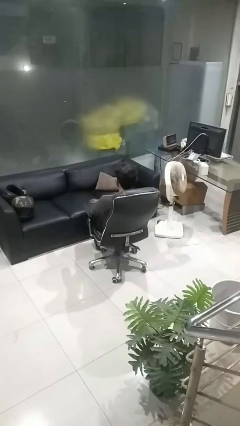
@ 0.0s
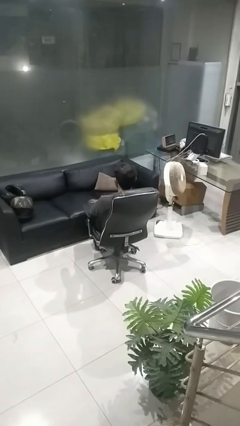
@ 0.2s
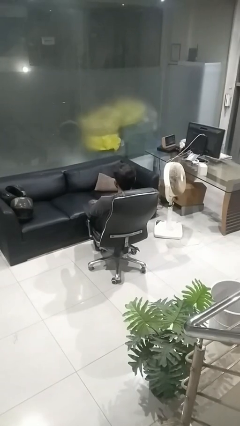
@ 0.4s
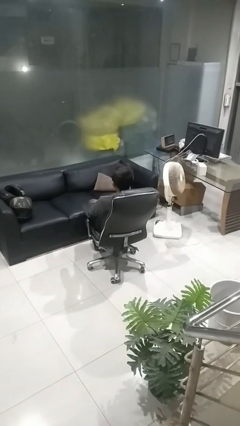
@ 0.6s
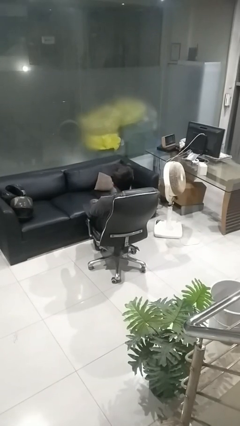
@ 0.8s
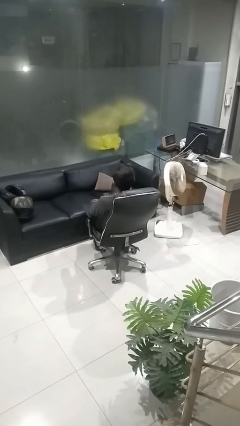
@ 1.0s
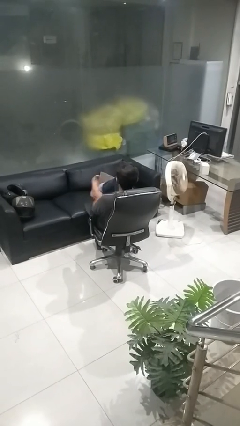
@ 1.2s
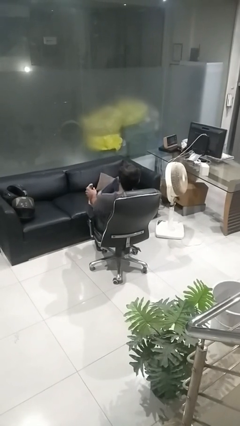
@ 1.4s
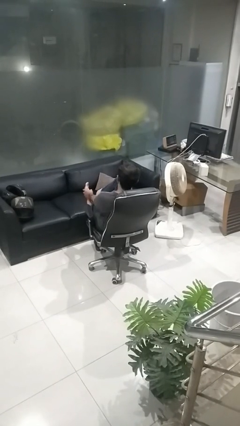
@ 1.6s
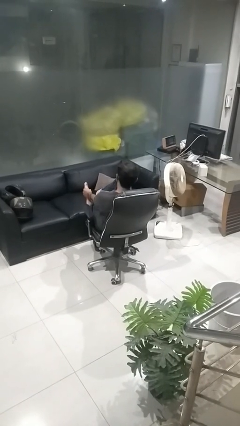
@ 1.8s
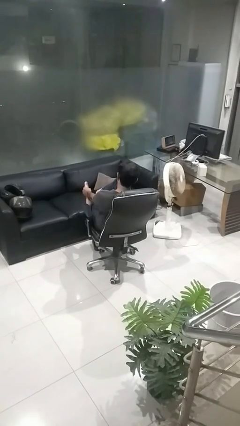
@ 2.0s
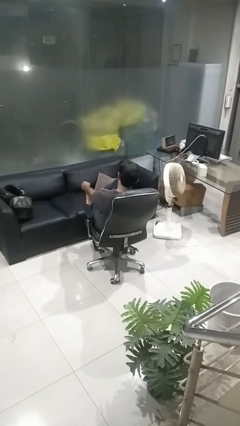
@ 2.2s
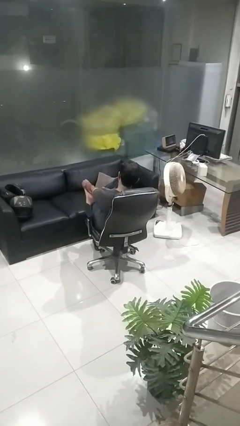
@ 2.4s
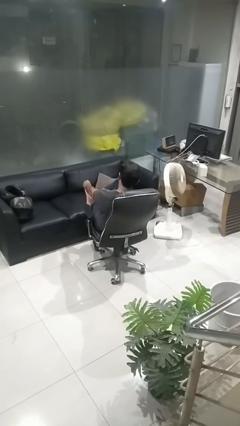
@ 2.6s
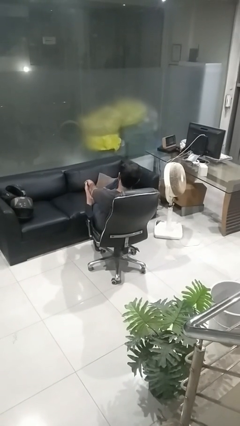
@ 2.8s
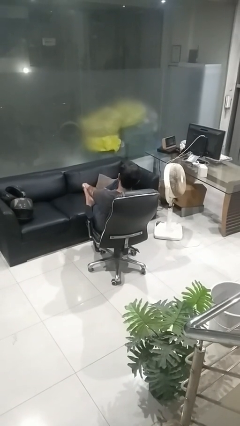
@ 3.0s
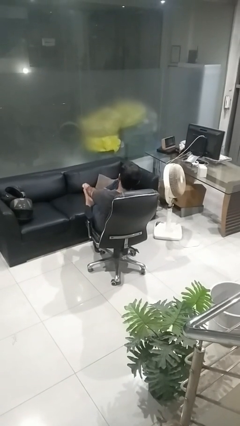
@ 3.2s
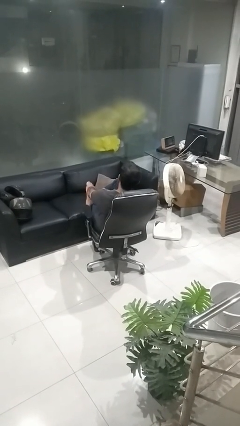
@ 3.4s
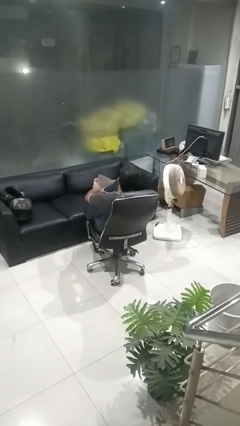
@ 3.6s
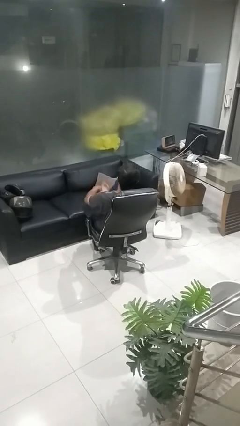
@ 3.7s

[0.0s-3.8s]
person rubs foot

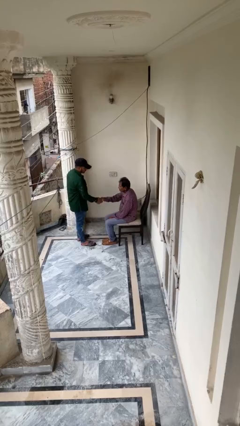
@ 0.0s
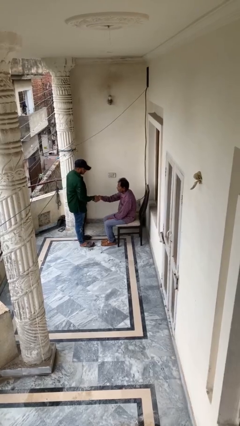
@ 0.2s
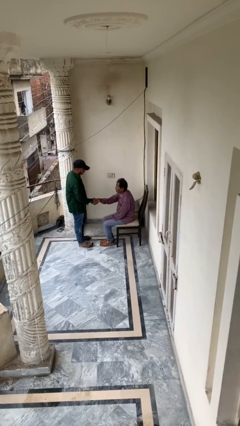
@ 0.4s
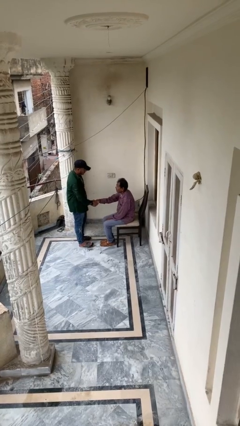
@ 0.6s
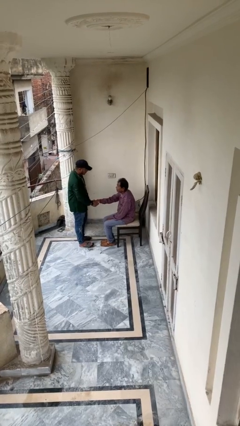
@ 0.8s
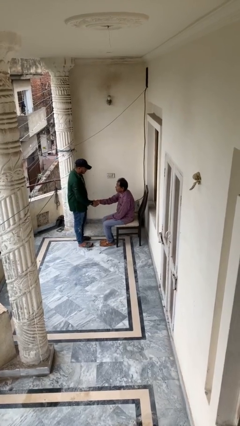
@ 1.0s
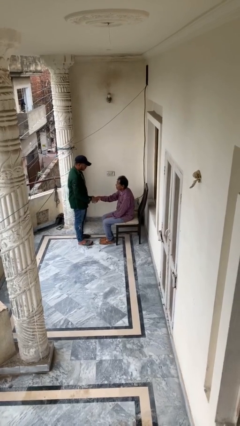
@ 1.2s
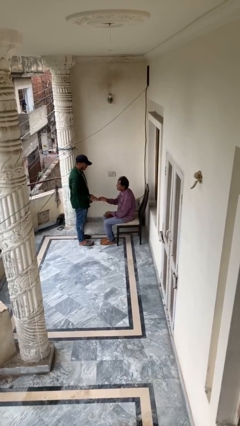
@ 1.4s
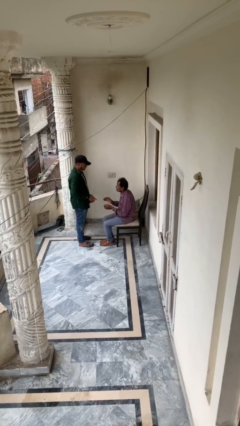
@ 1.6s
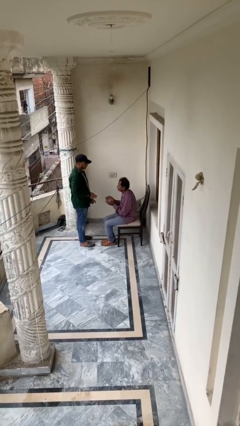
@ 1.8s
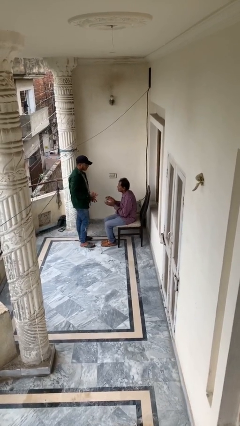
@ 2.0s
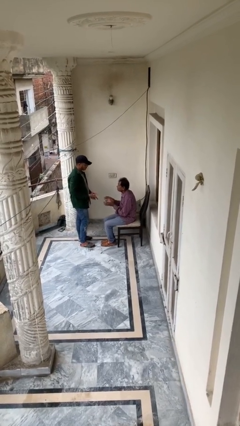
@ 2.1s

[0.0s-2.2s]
person shakes hand

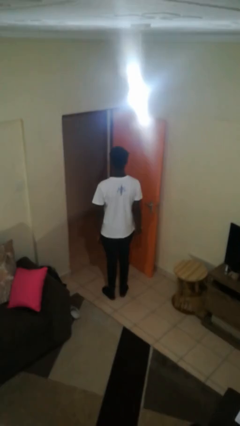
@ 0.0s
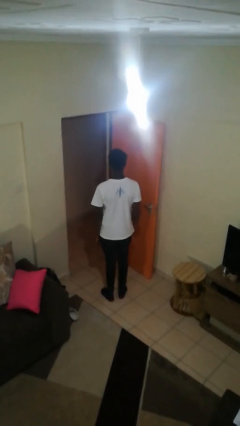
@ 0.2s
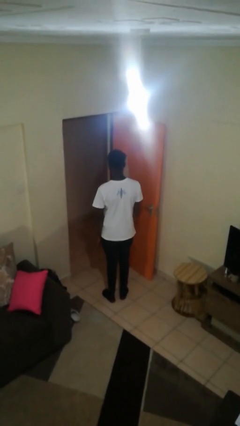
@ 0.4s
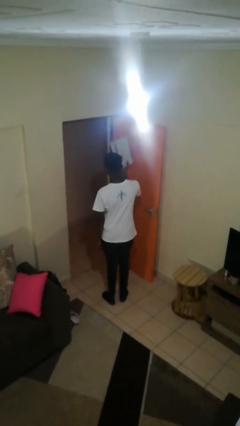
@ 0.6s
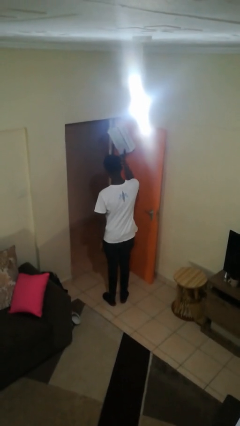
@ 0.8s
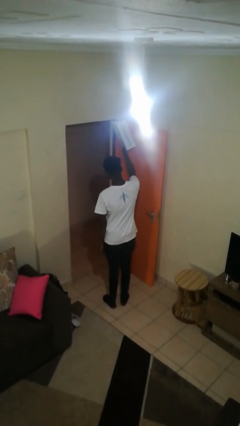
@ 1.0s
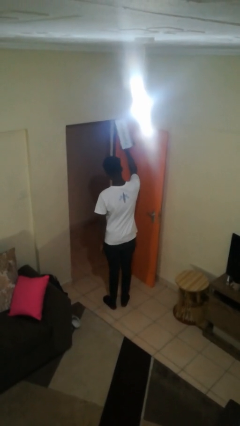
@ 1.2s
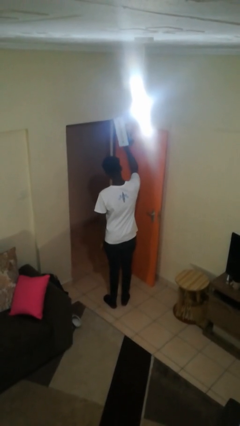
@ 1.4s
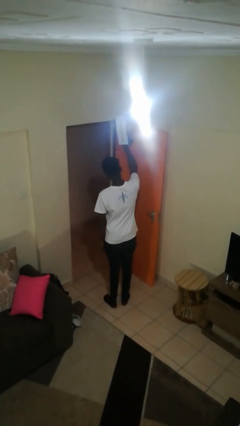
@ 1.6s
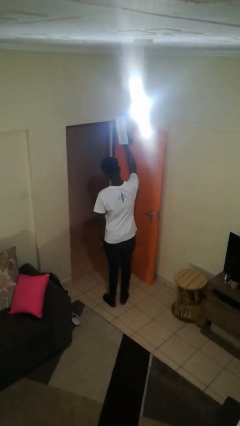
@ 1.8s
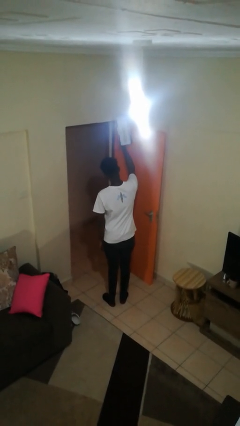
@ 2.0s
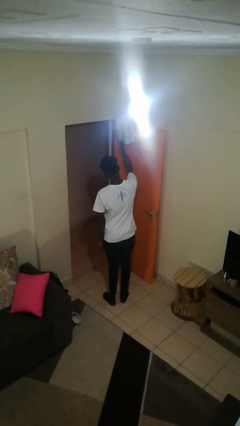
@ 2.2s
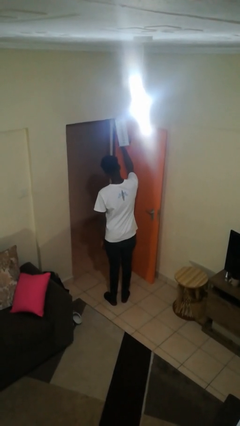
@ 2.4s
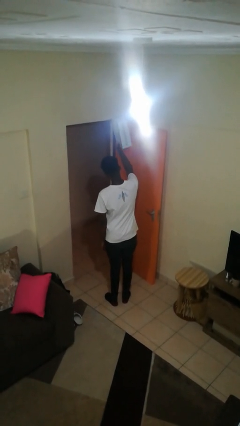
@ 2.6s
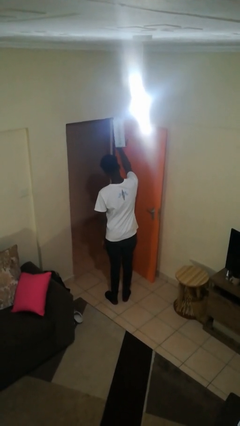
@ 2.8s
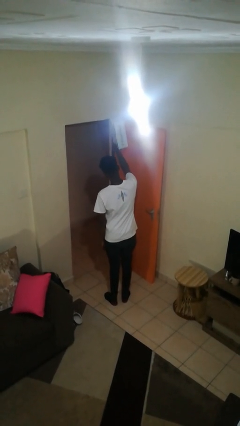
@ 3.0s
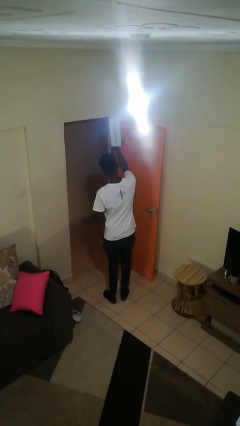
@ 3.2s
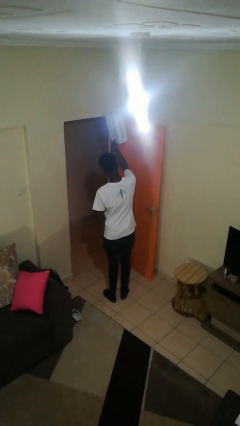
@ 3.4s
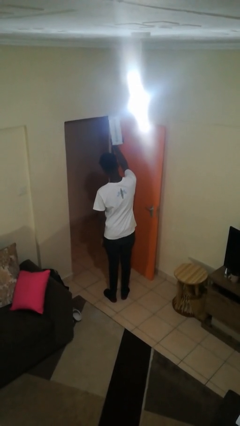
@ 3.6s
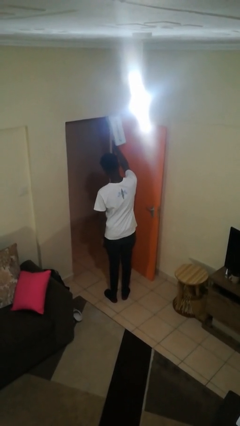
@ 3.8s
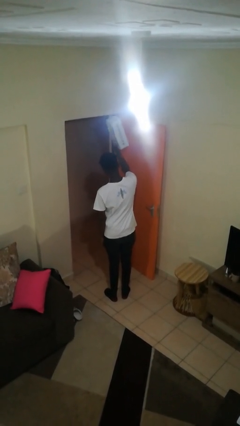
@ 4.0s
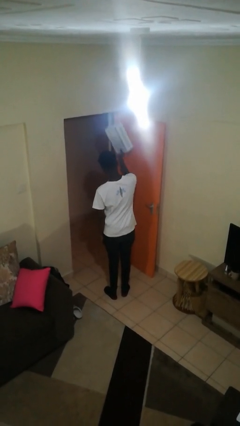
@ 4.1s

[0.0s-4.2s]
person holds object above head

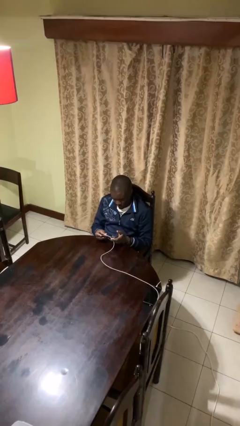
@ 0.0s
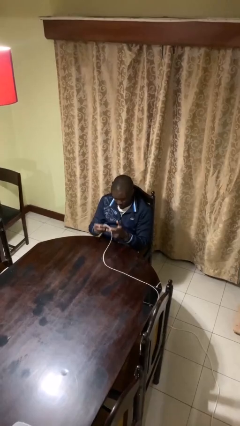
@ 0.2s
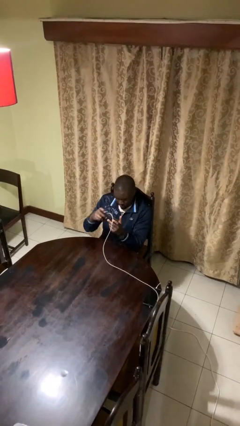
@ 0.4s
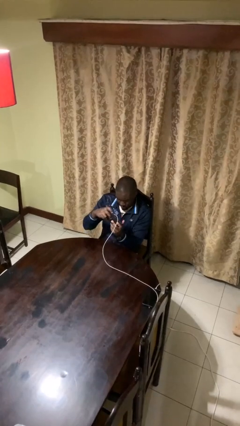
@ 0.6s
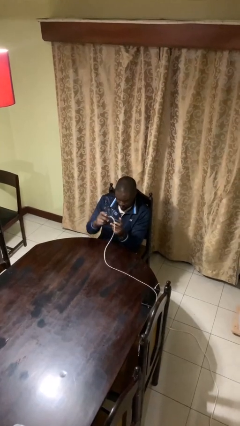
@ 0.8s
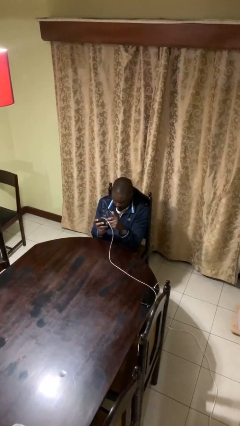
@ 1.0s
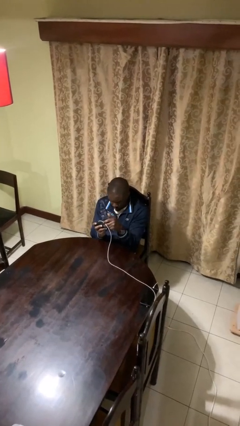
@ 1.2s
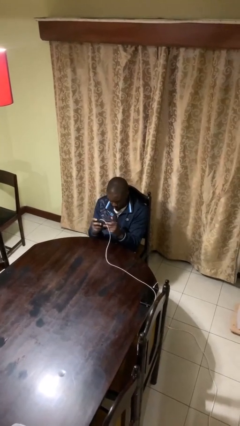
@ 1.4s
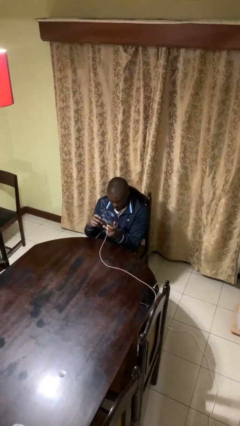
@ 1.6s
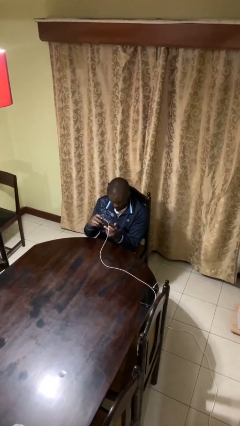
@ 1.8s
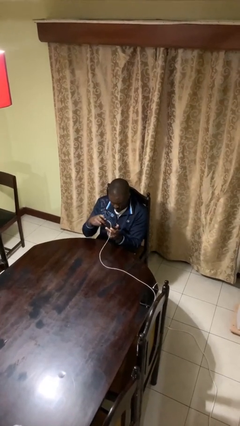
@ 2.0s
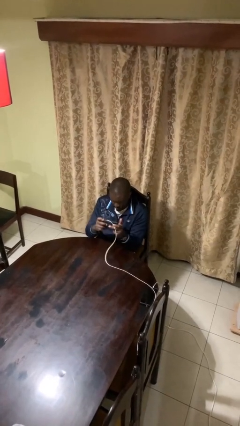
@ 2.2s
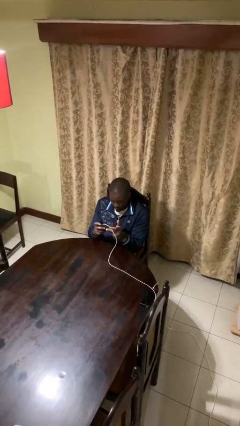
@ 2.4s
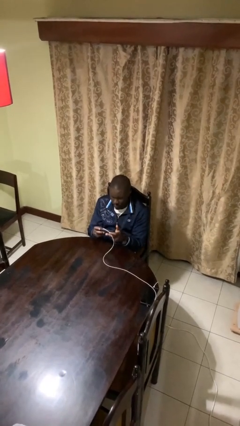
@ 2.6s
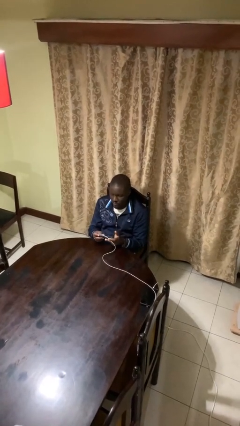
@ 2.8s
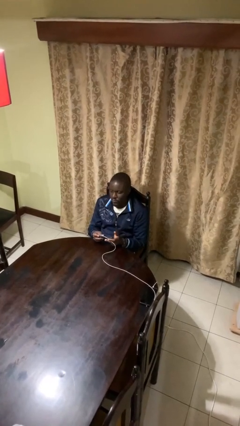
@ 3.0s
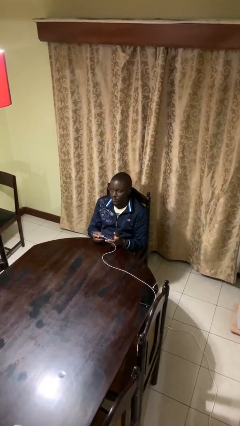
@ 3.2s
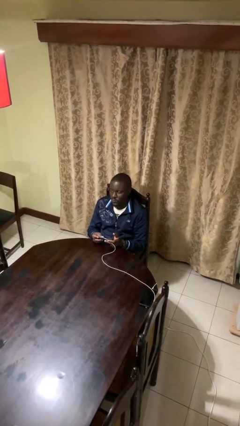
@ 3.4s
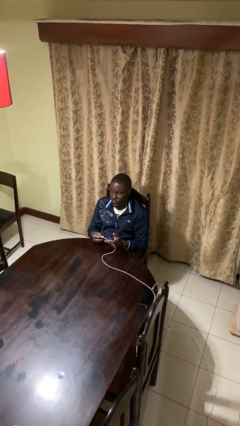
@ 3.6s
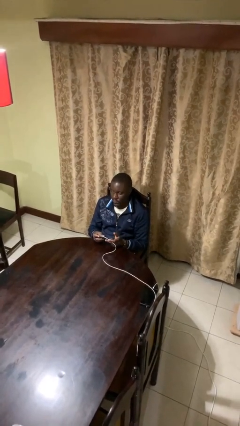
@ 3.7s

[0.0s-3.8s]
person interacts with handheld game

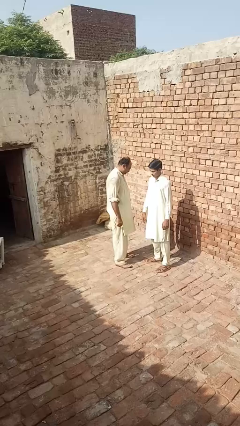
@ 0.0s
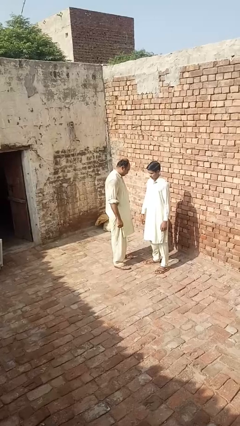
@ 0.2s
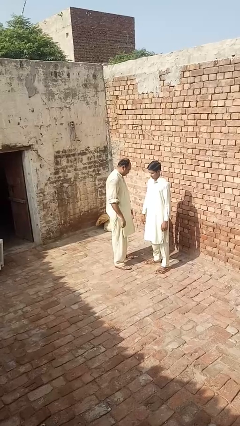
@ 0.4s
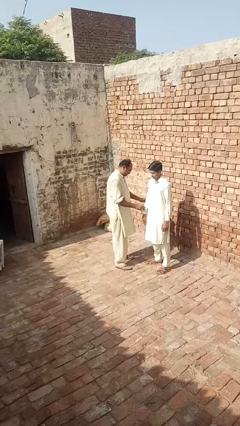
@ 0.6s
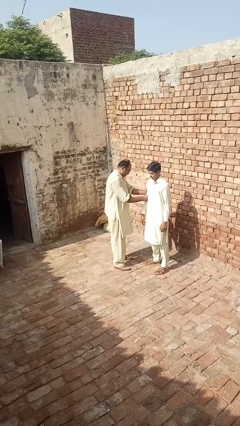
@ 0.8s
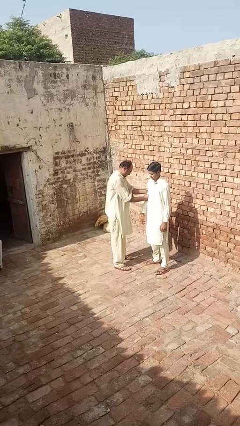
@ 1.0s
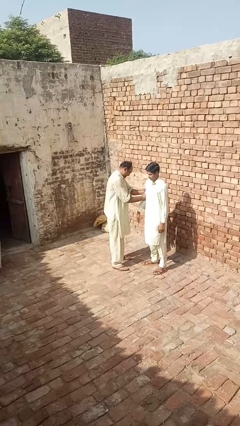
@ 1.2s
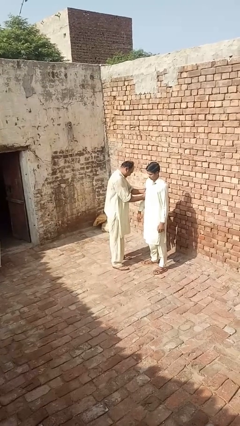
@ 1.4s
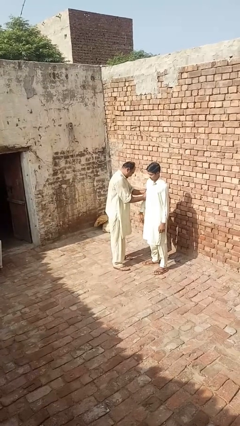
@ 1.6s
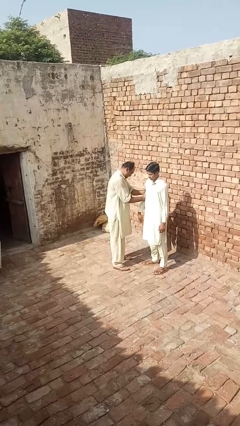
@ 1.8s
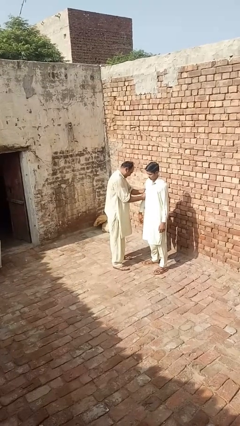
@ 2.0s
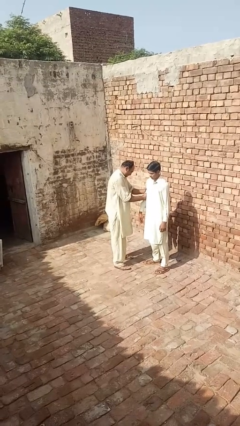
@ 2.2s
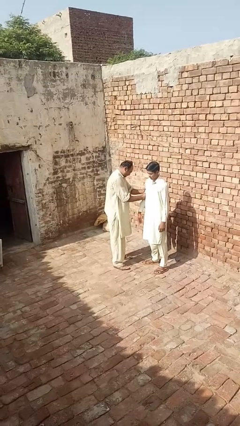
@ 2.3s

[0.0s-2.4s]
person grabs person by bicep

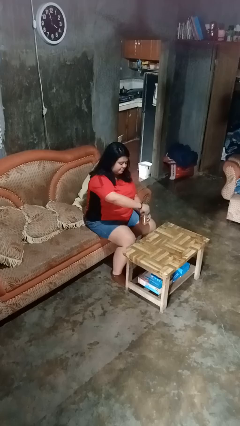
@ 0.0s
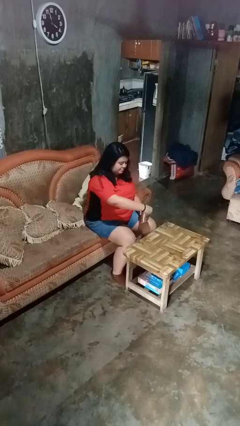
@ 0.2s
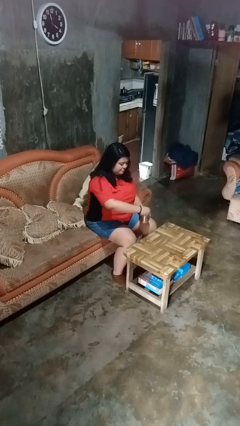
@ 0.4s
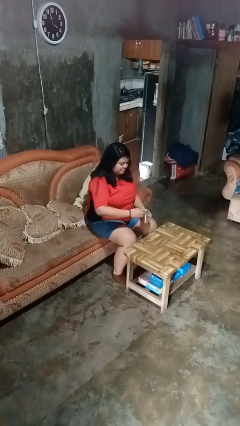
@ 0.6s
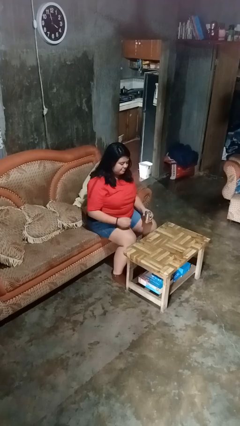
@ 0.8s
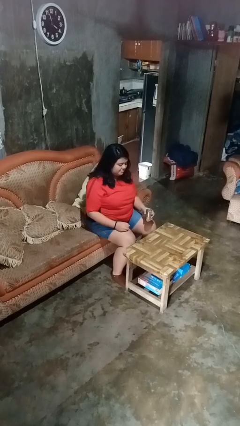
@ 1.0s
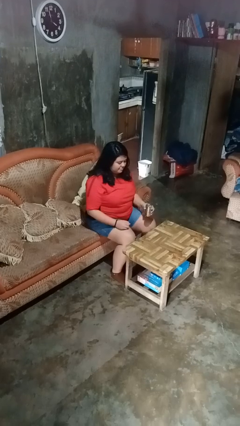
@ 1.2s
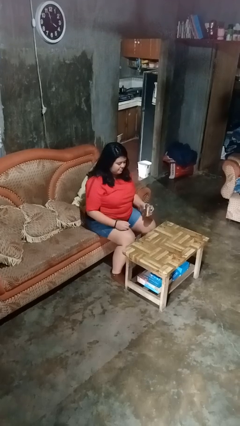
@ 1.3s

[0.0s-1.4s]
person opens beverage can
